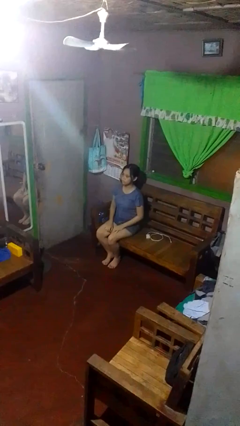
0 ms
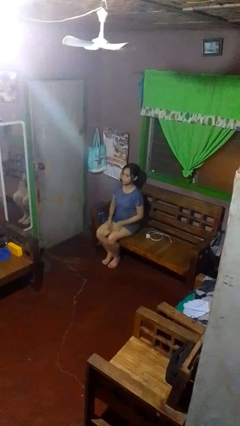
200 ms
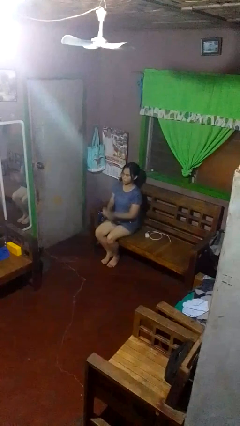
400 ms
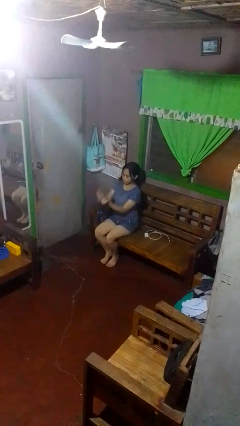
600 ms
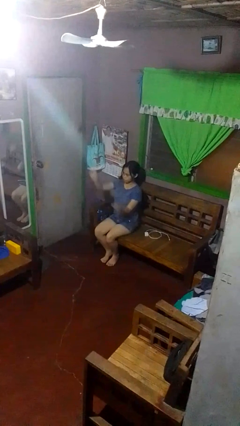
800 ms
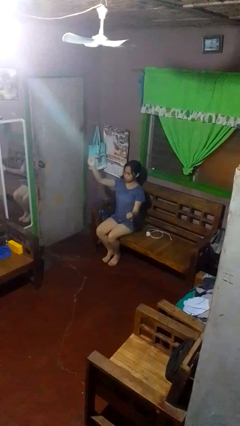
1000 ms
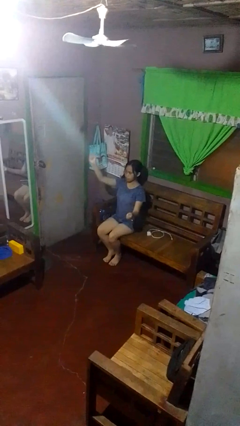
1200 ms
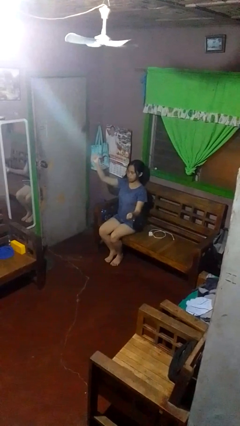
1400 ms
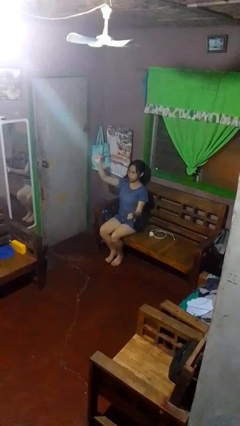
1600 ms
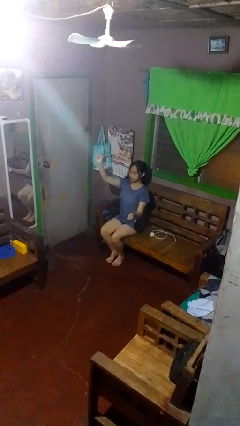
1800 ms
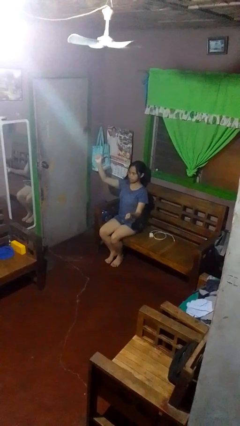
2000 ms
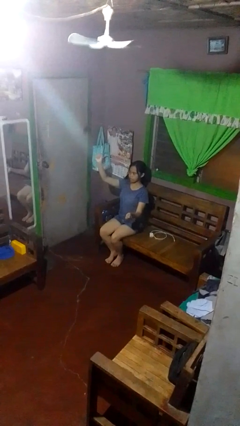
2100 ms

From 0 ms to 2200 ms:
person gestures zoom in

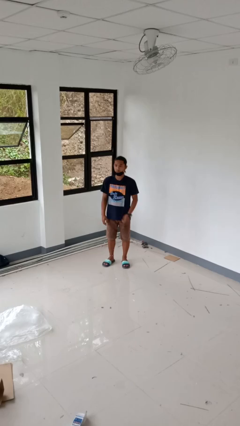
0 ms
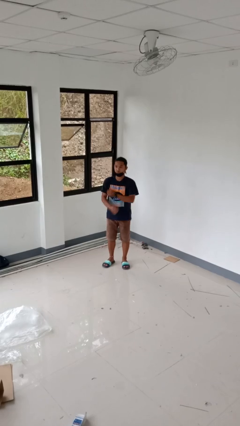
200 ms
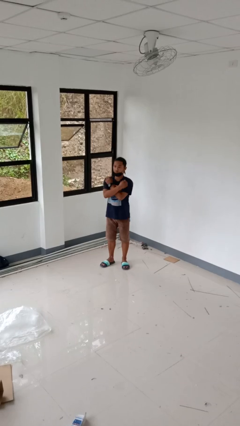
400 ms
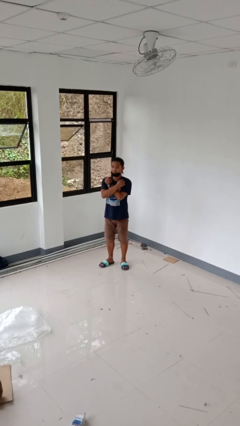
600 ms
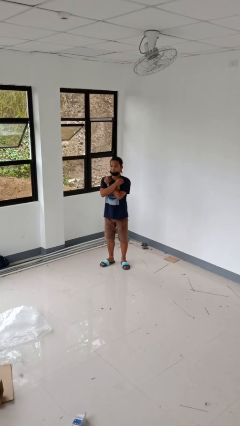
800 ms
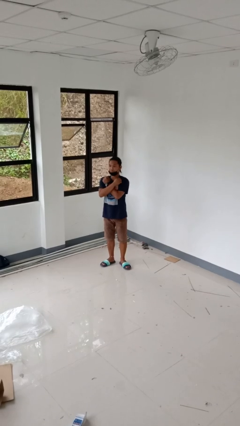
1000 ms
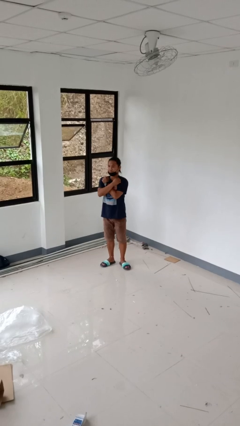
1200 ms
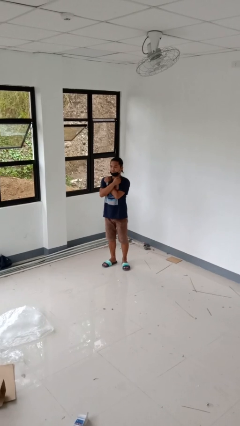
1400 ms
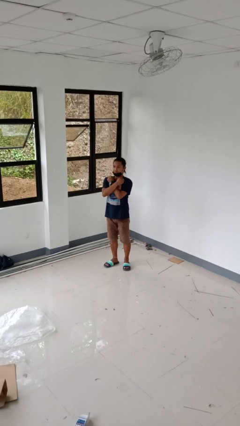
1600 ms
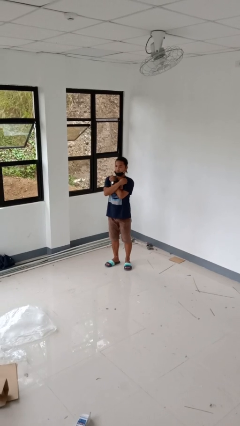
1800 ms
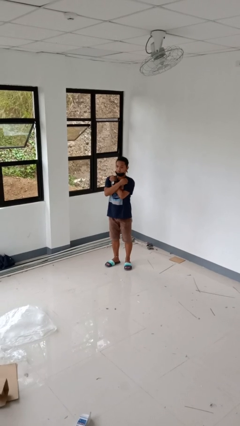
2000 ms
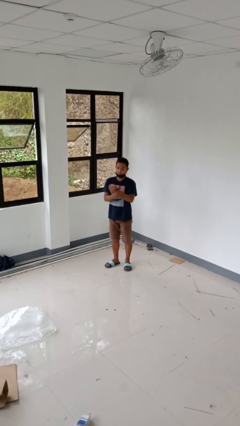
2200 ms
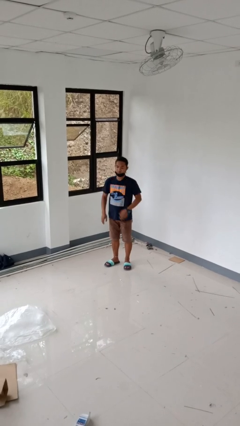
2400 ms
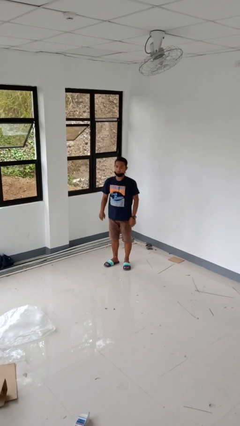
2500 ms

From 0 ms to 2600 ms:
person gestures arms x

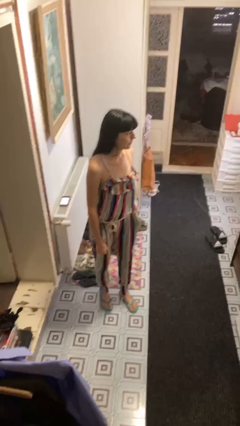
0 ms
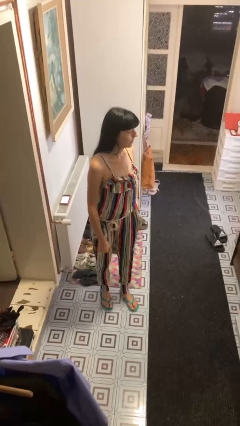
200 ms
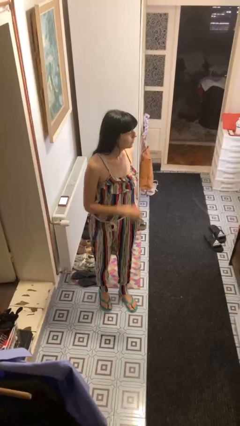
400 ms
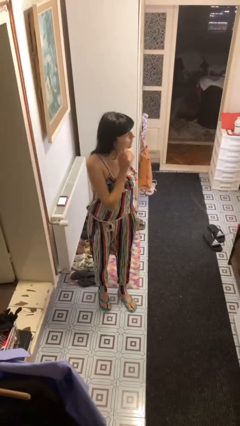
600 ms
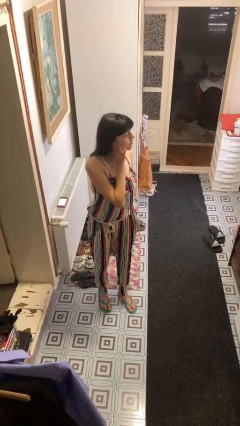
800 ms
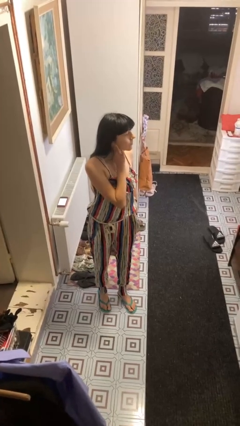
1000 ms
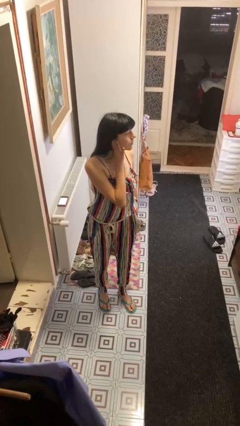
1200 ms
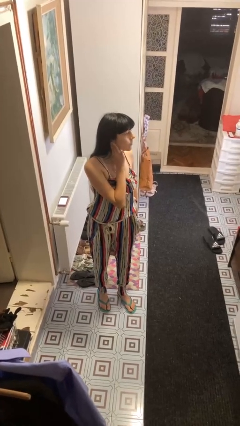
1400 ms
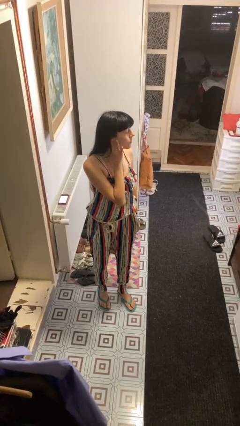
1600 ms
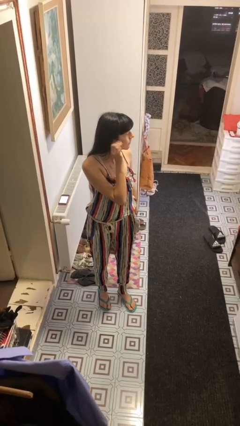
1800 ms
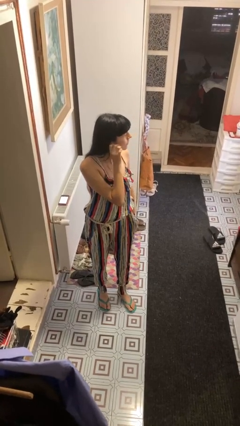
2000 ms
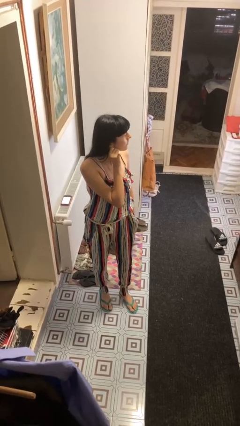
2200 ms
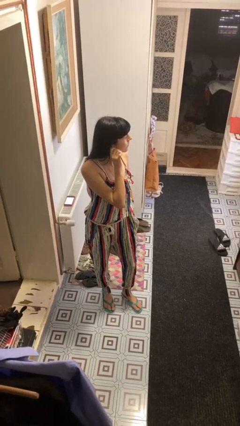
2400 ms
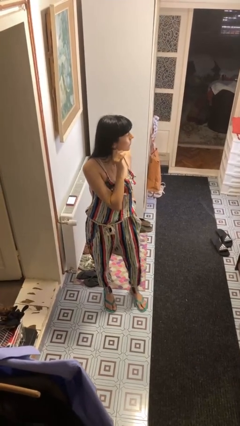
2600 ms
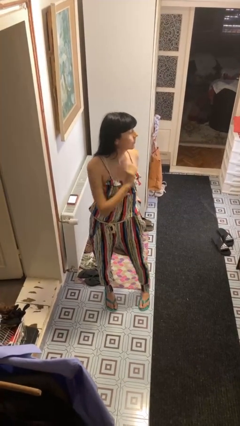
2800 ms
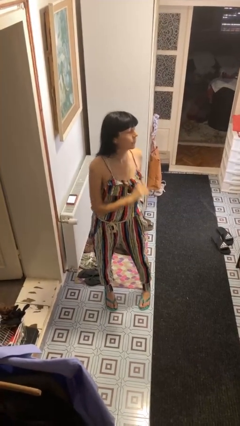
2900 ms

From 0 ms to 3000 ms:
person touches earlobe

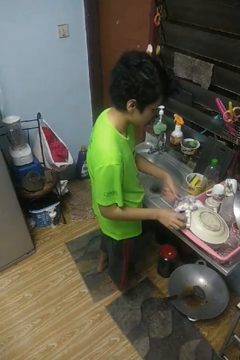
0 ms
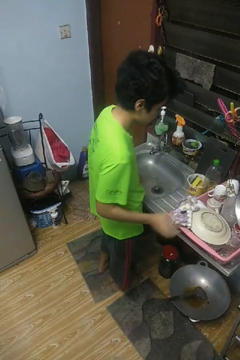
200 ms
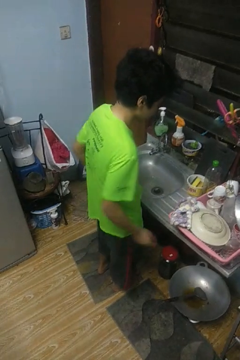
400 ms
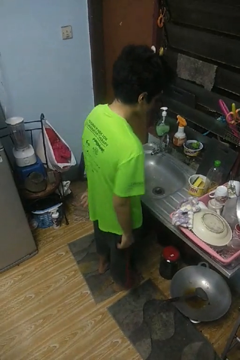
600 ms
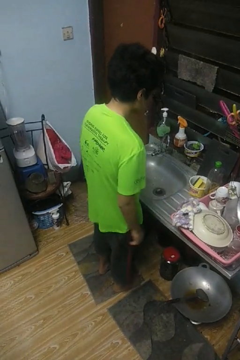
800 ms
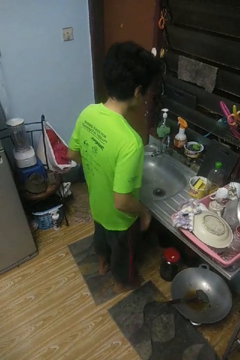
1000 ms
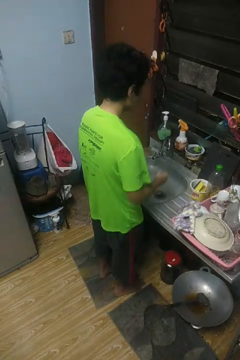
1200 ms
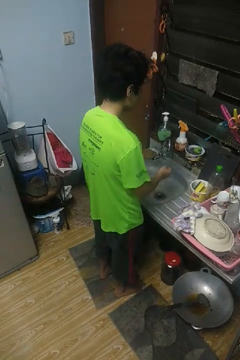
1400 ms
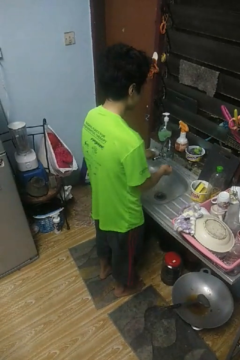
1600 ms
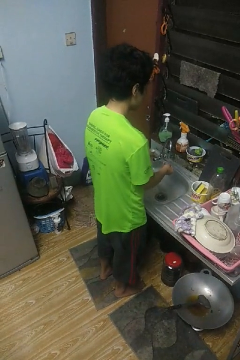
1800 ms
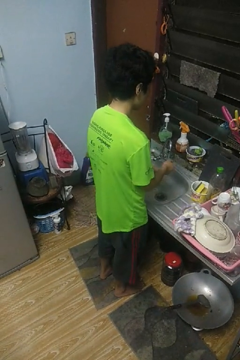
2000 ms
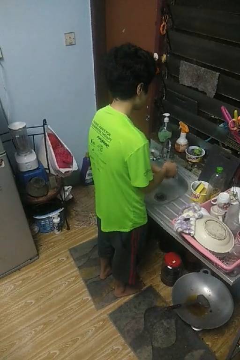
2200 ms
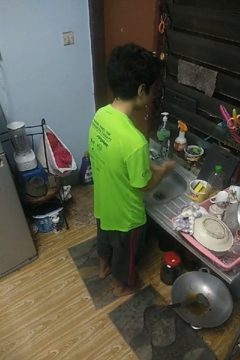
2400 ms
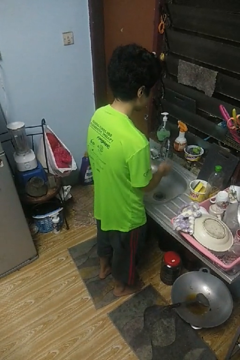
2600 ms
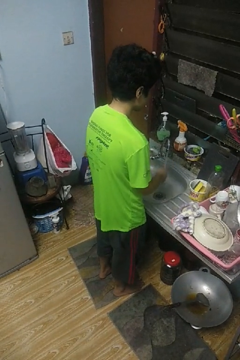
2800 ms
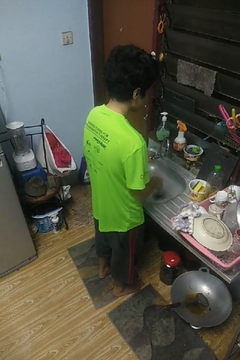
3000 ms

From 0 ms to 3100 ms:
person washes hands

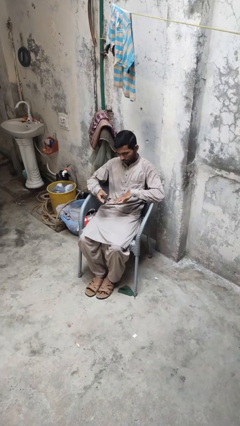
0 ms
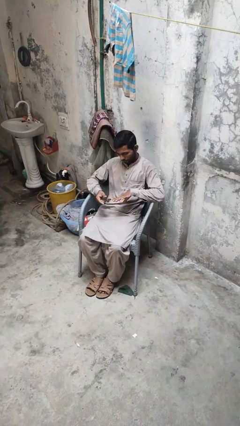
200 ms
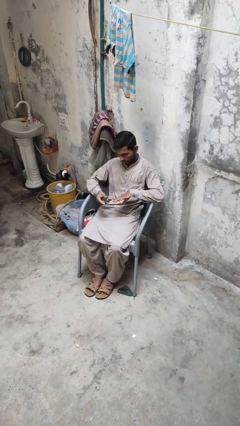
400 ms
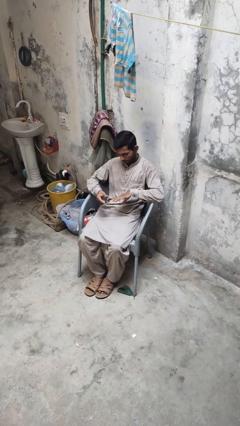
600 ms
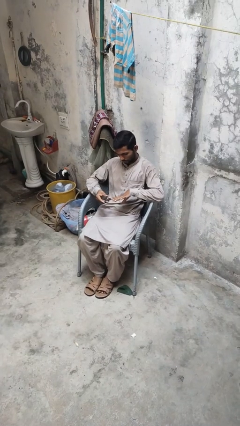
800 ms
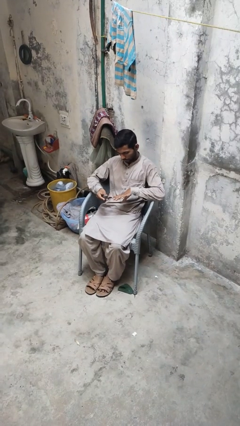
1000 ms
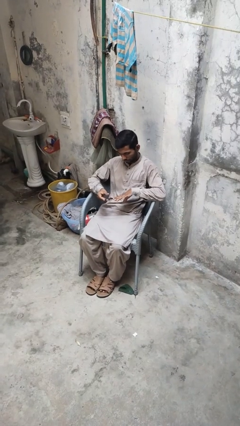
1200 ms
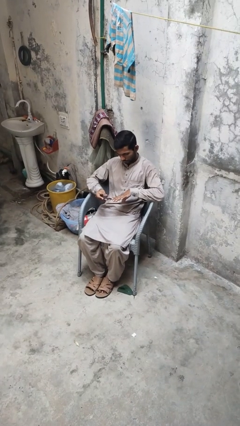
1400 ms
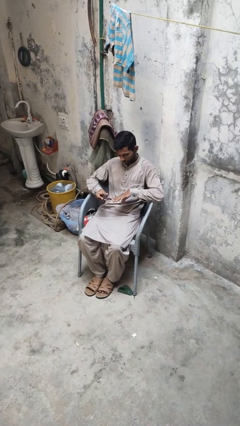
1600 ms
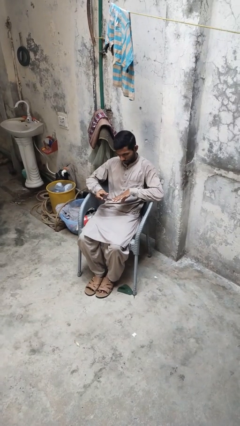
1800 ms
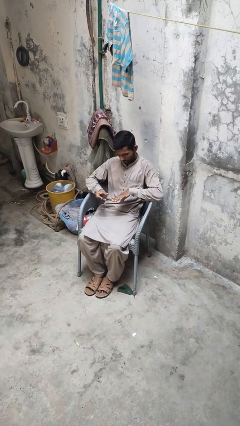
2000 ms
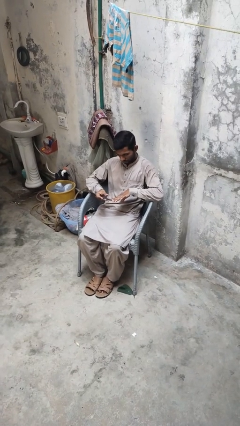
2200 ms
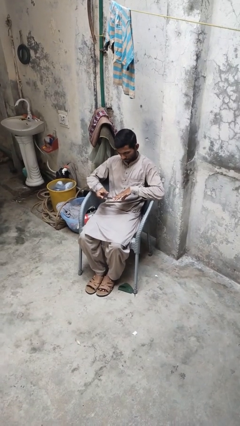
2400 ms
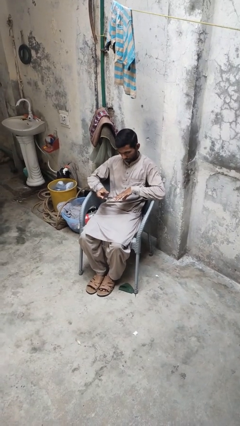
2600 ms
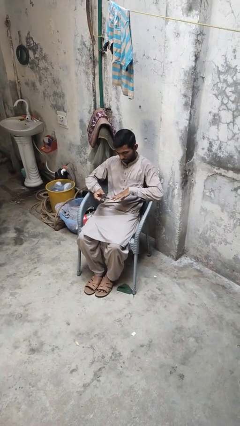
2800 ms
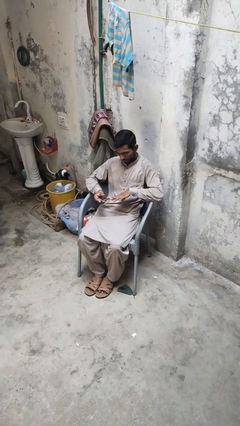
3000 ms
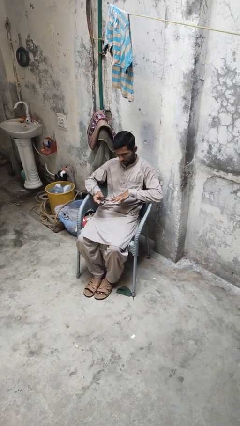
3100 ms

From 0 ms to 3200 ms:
person clips fingernails

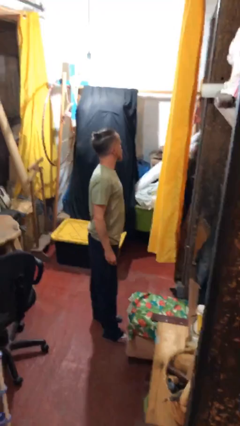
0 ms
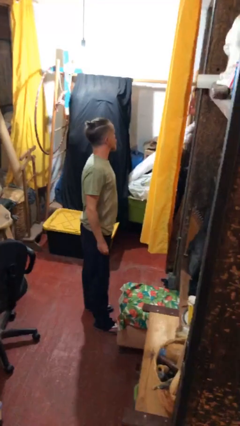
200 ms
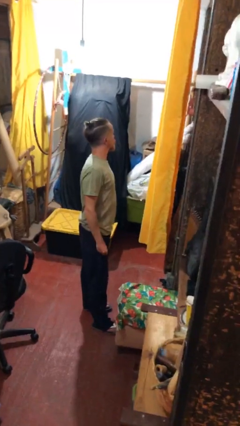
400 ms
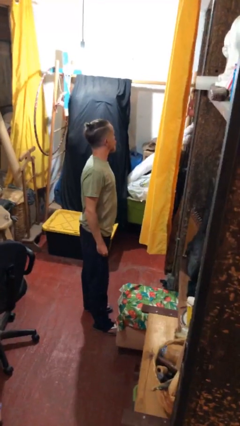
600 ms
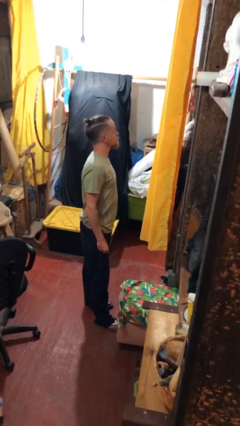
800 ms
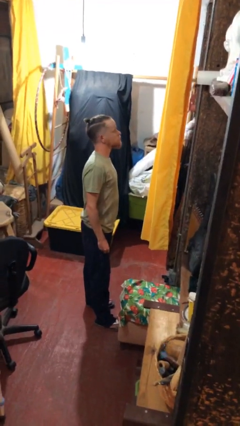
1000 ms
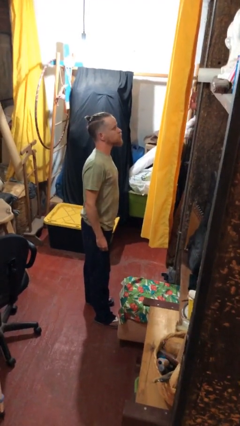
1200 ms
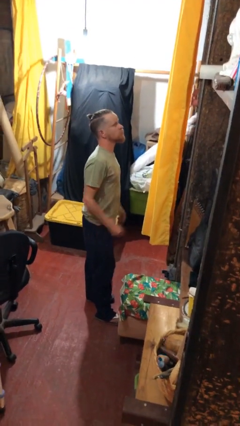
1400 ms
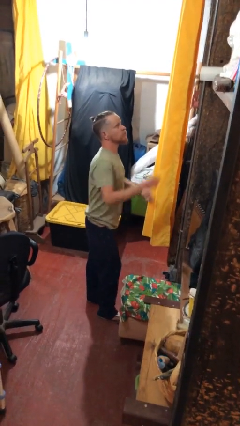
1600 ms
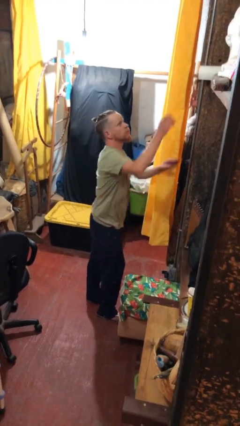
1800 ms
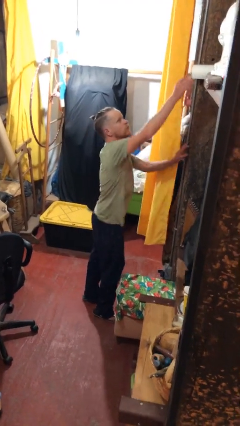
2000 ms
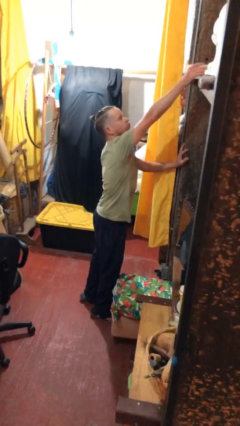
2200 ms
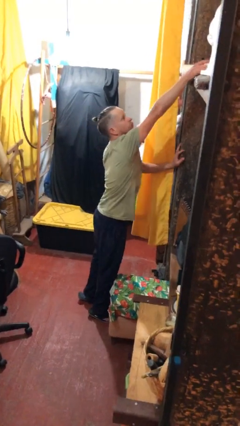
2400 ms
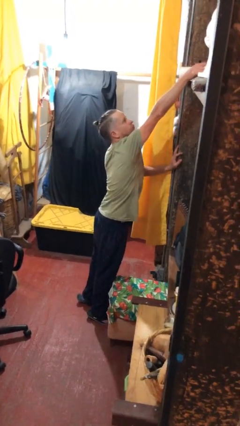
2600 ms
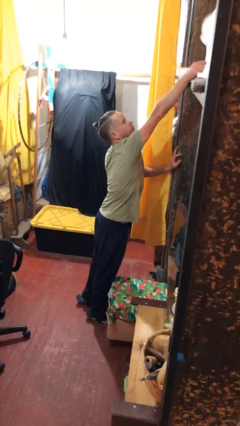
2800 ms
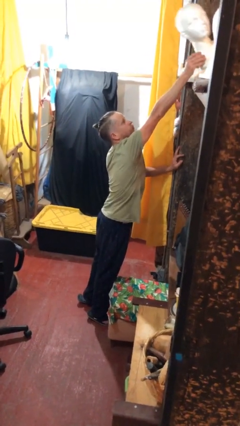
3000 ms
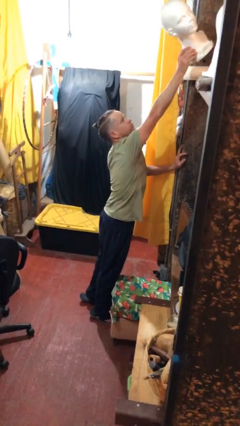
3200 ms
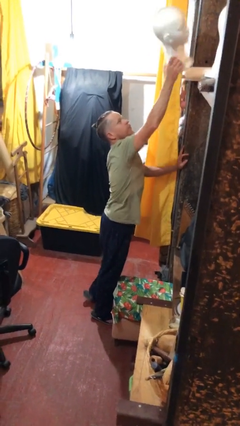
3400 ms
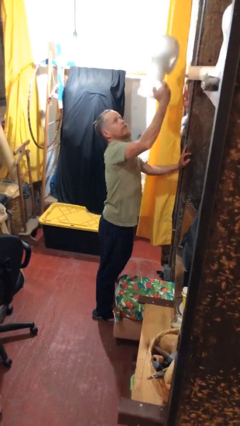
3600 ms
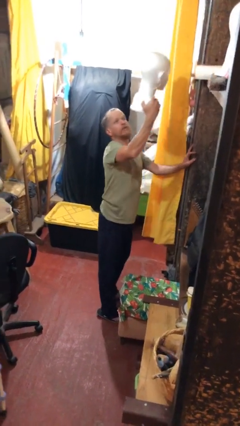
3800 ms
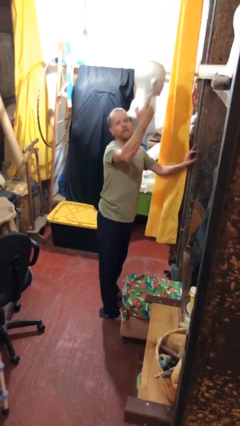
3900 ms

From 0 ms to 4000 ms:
person picks up object from shelf
